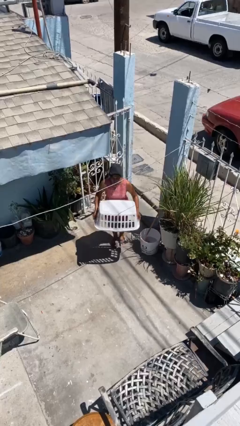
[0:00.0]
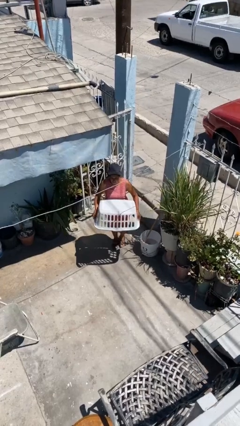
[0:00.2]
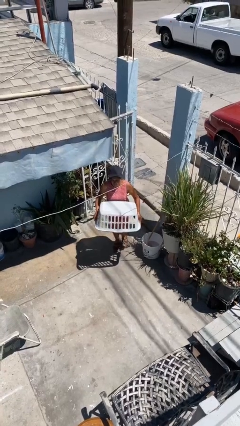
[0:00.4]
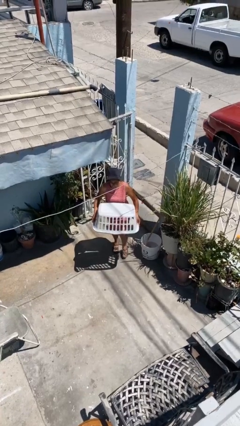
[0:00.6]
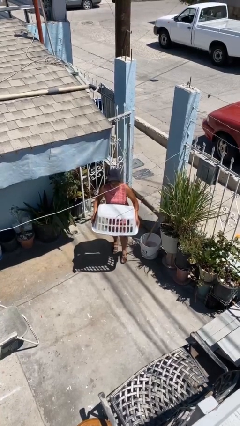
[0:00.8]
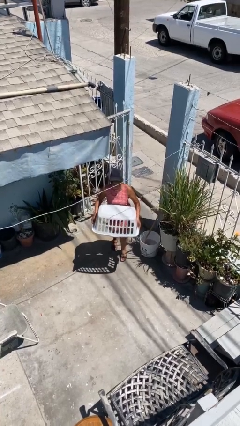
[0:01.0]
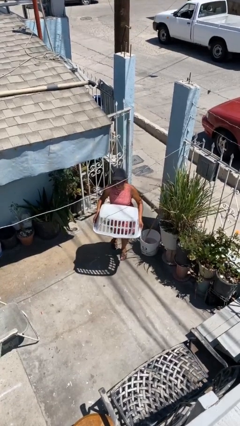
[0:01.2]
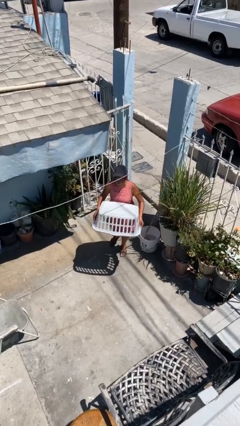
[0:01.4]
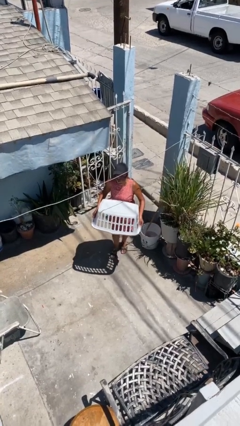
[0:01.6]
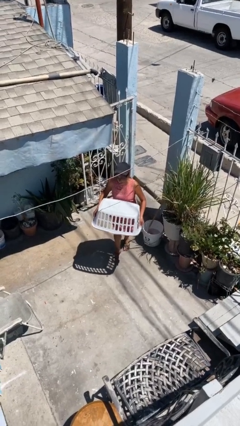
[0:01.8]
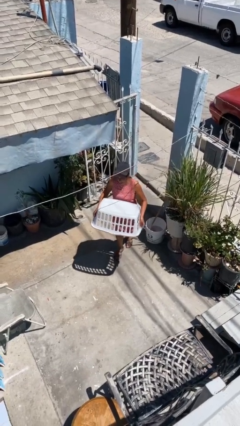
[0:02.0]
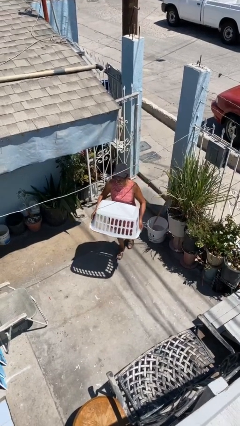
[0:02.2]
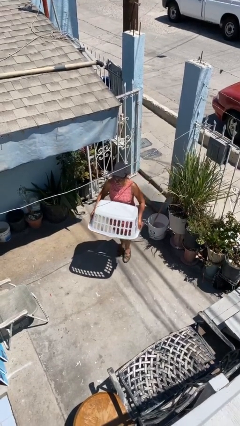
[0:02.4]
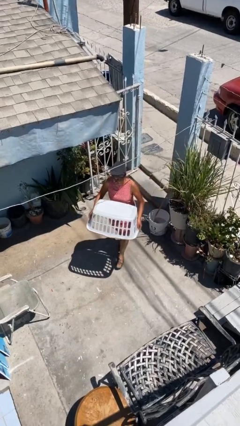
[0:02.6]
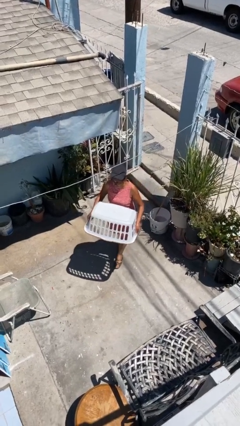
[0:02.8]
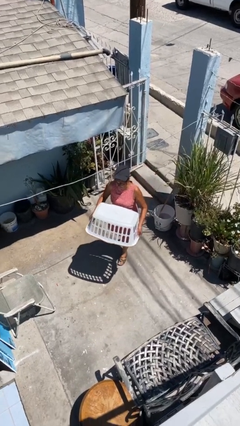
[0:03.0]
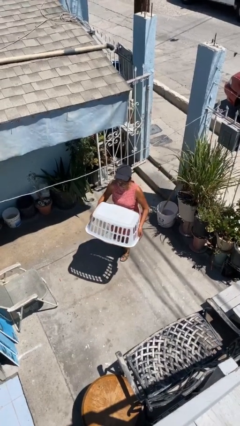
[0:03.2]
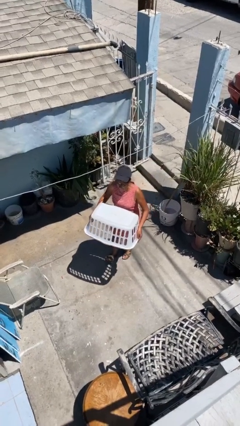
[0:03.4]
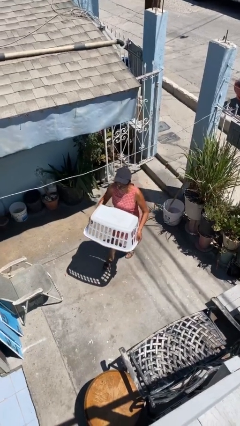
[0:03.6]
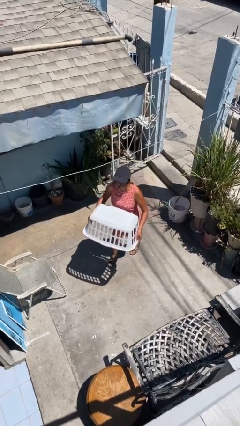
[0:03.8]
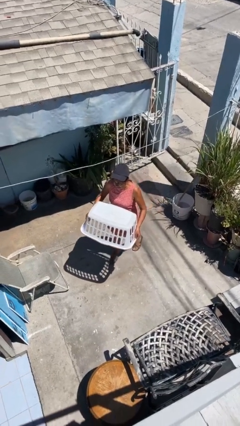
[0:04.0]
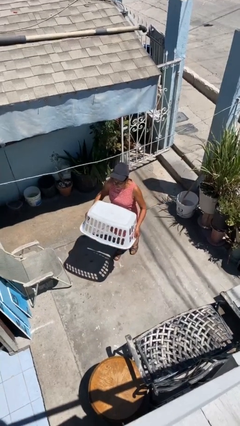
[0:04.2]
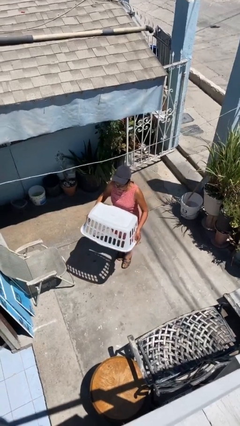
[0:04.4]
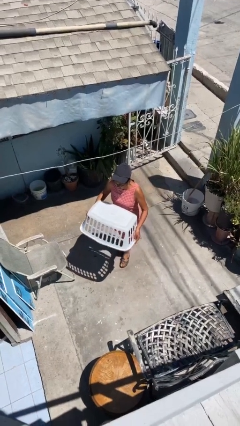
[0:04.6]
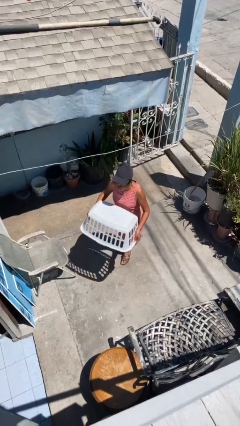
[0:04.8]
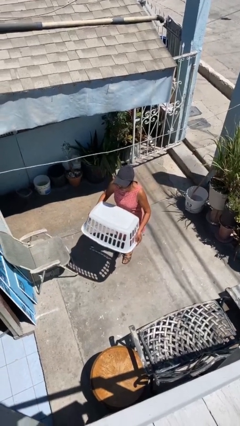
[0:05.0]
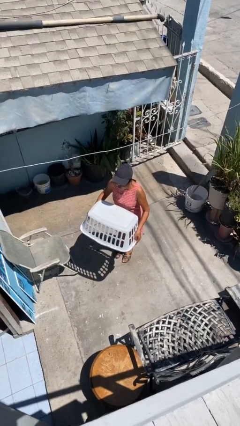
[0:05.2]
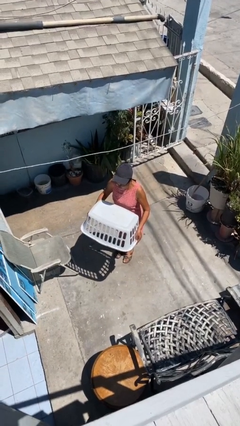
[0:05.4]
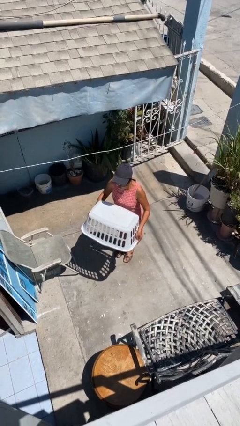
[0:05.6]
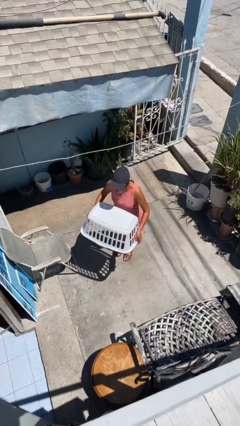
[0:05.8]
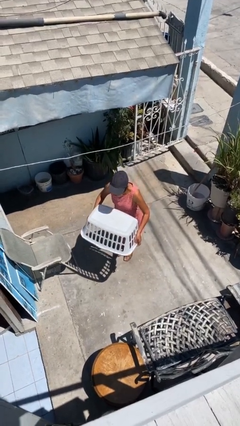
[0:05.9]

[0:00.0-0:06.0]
person carries heavy object

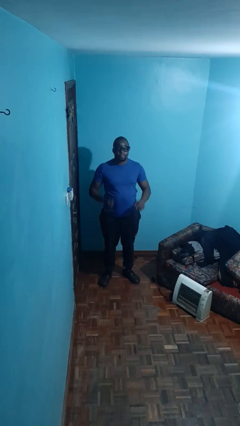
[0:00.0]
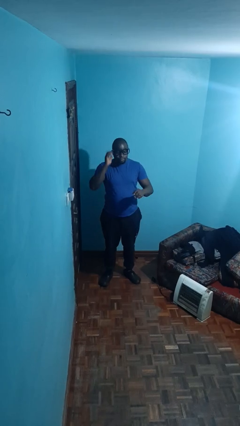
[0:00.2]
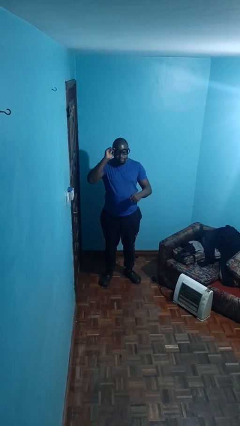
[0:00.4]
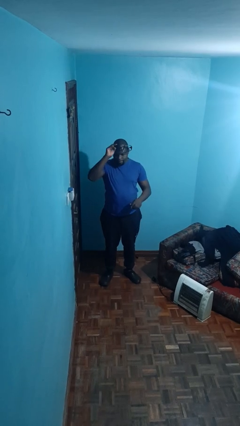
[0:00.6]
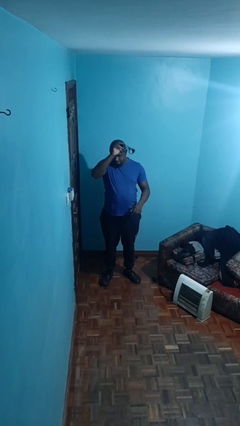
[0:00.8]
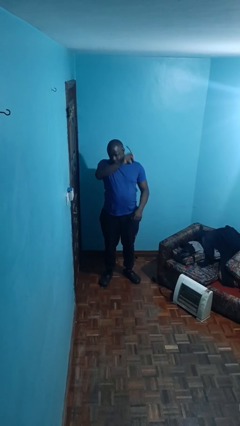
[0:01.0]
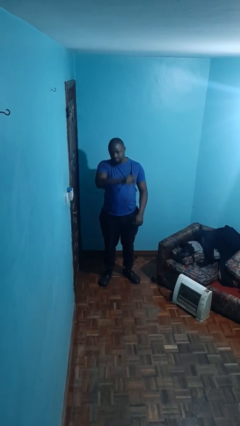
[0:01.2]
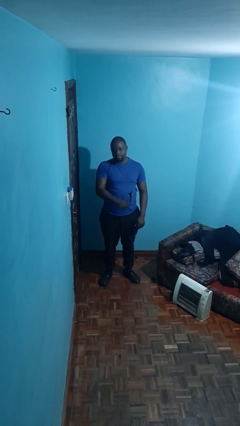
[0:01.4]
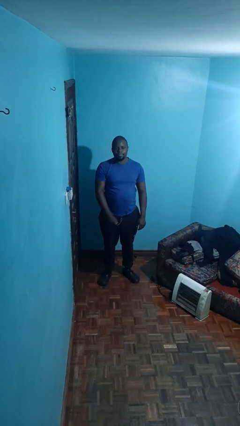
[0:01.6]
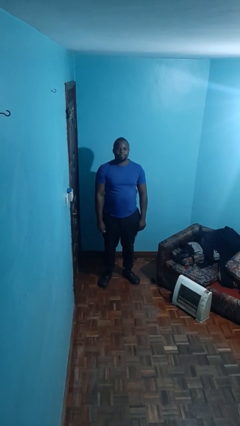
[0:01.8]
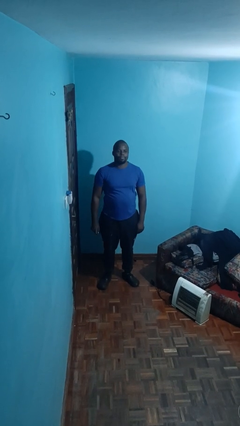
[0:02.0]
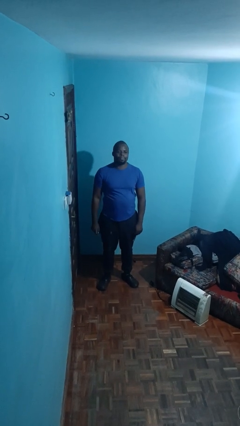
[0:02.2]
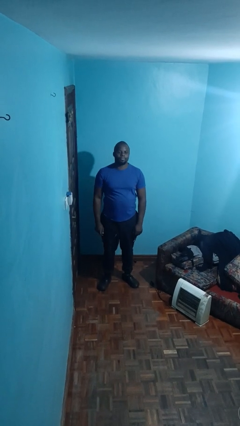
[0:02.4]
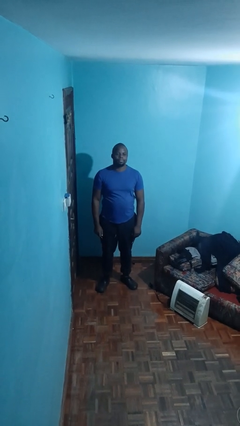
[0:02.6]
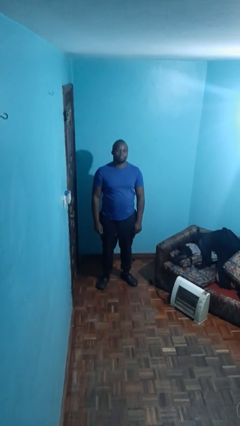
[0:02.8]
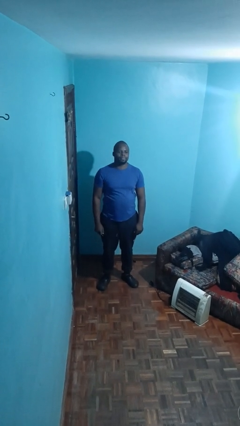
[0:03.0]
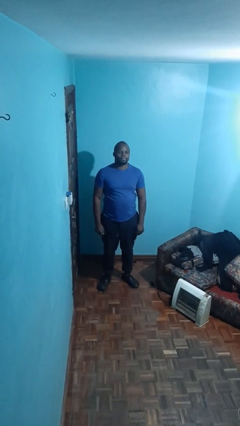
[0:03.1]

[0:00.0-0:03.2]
person takes off glasses

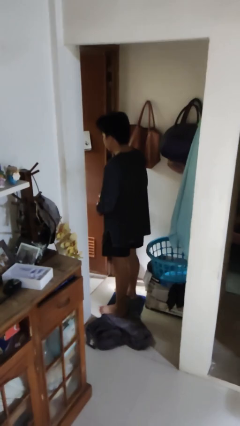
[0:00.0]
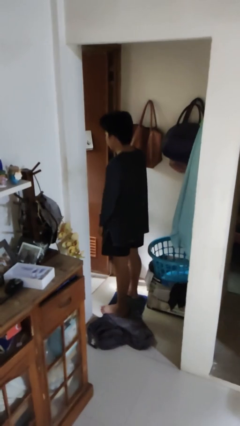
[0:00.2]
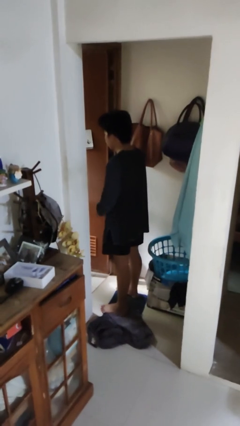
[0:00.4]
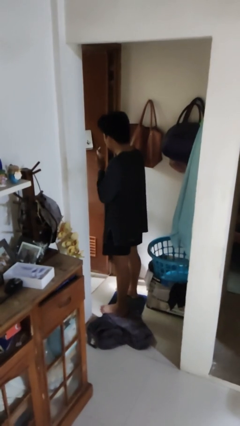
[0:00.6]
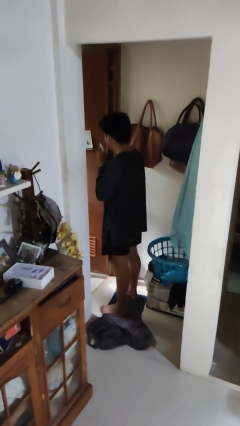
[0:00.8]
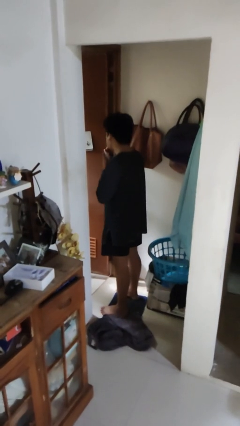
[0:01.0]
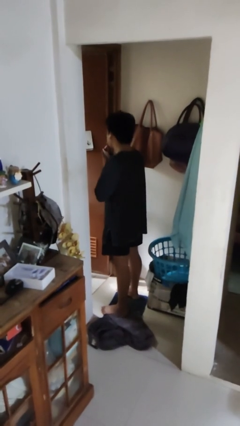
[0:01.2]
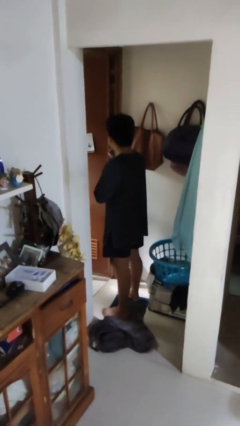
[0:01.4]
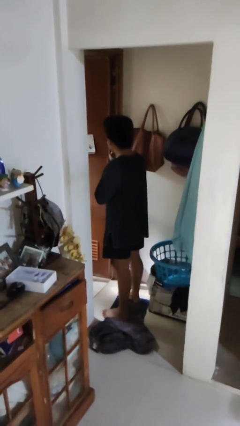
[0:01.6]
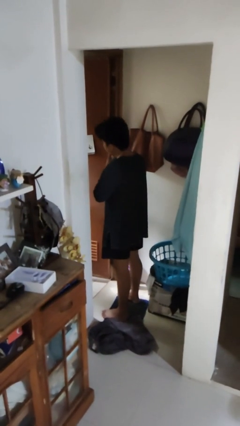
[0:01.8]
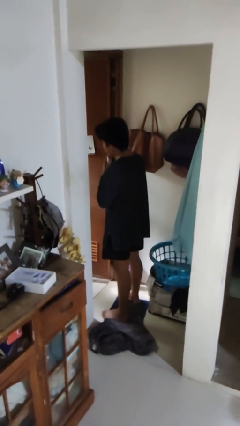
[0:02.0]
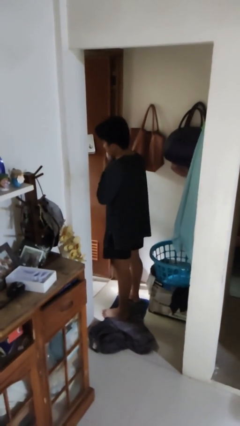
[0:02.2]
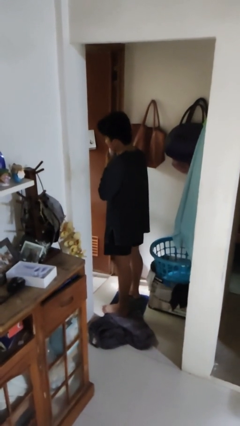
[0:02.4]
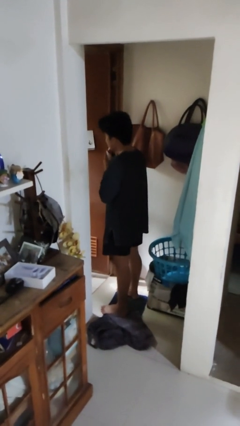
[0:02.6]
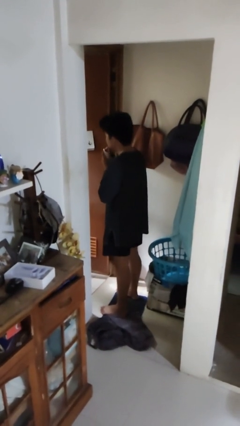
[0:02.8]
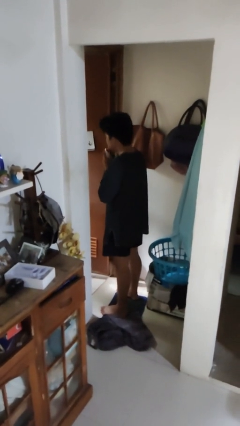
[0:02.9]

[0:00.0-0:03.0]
person shaves face

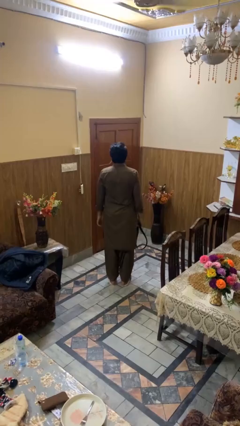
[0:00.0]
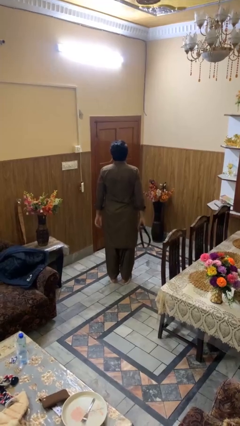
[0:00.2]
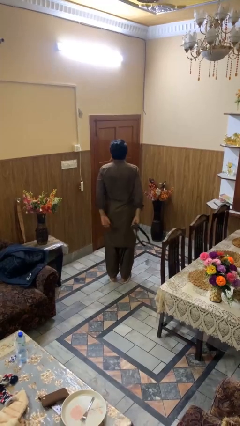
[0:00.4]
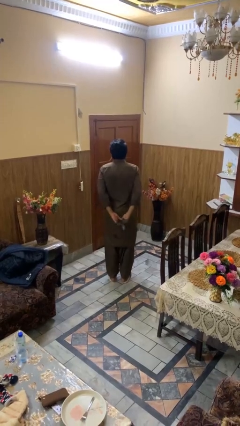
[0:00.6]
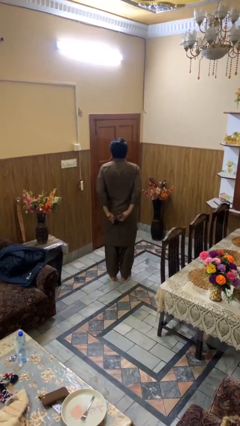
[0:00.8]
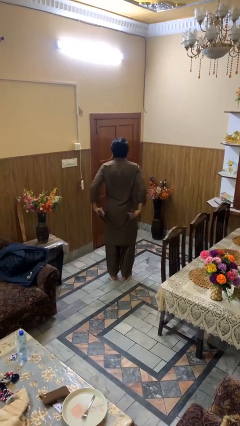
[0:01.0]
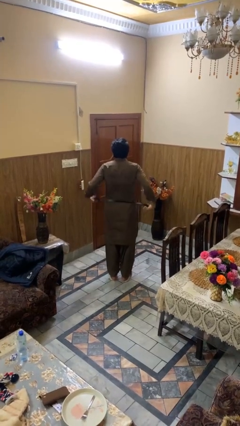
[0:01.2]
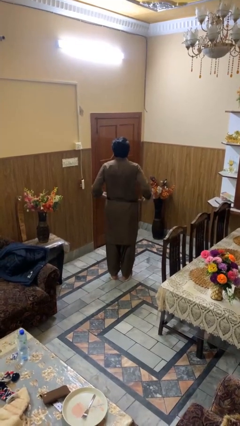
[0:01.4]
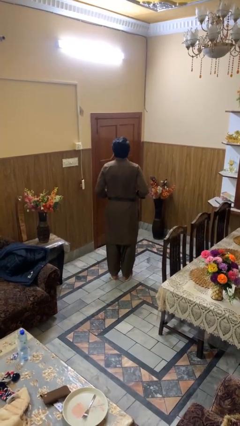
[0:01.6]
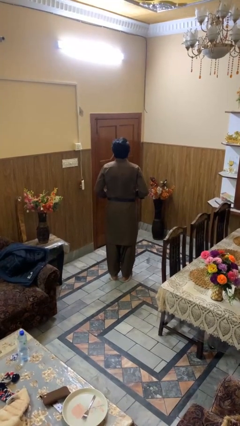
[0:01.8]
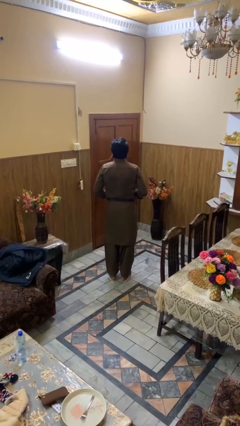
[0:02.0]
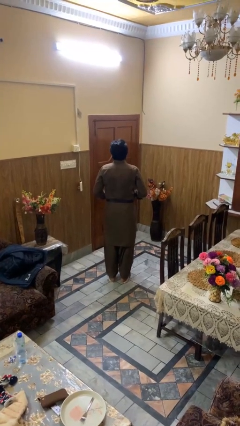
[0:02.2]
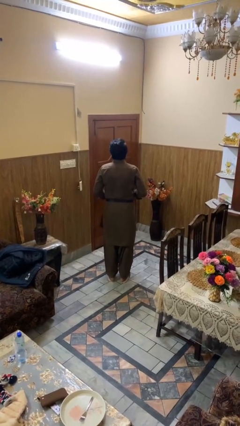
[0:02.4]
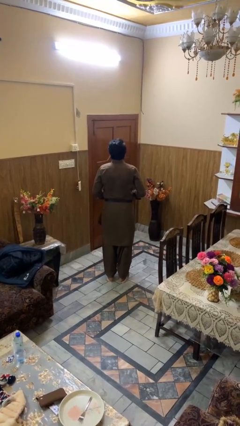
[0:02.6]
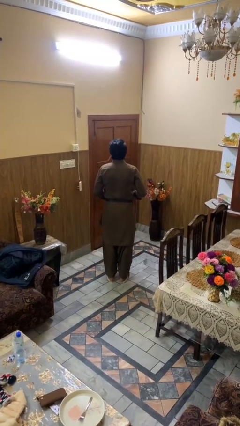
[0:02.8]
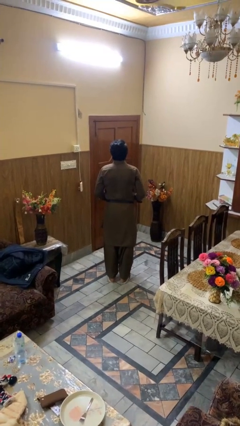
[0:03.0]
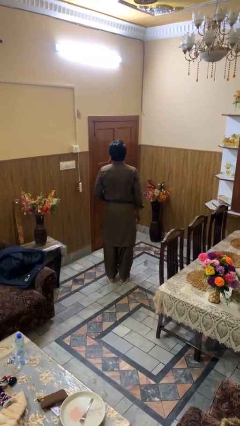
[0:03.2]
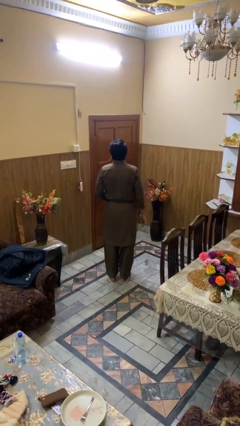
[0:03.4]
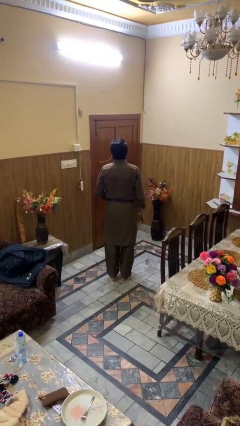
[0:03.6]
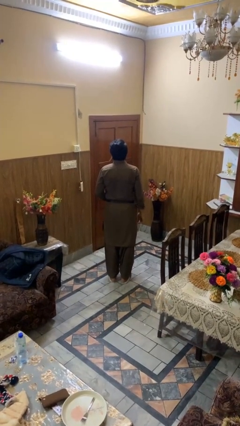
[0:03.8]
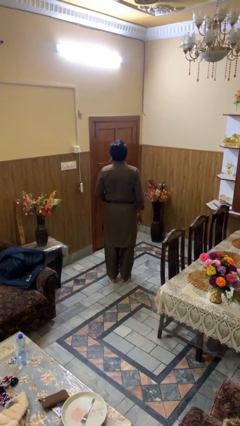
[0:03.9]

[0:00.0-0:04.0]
person puts on belt

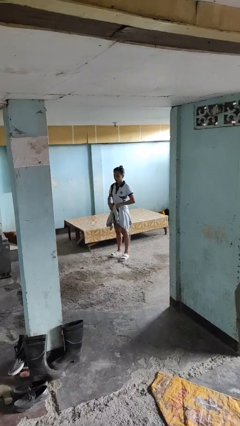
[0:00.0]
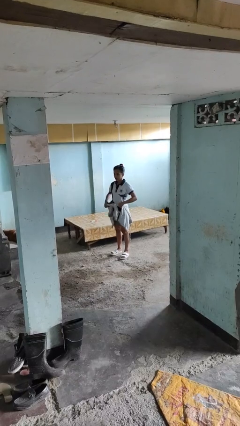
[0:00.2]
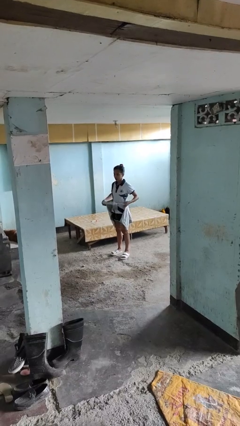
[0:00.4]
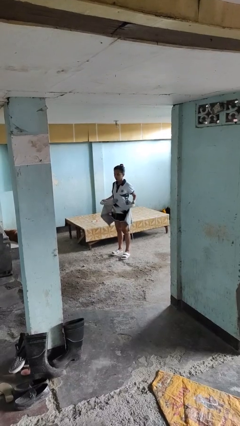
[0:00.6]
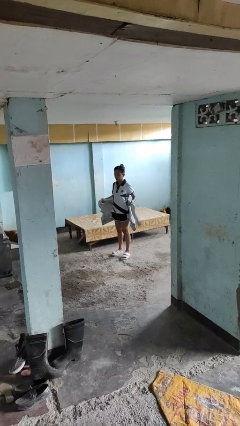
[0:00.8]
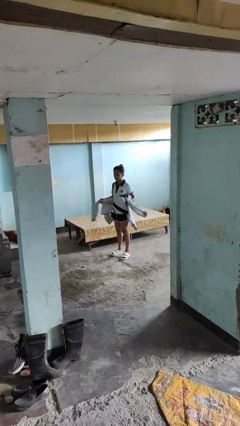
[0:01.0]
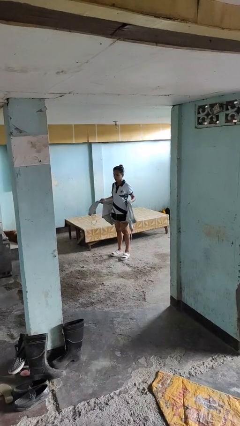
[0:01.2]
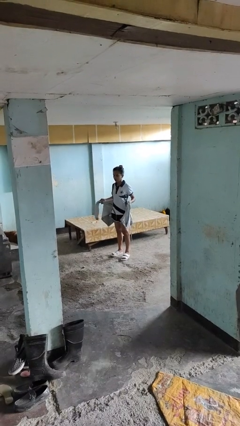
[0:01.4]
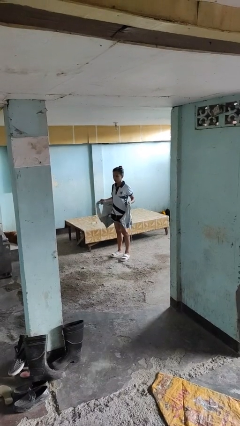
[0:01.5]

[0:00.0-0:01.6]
person unties jacket around waist

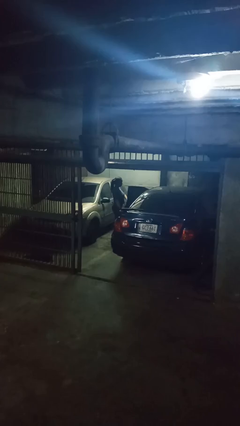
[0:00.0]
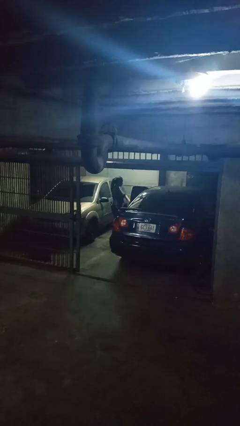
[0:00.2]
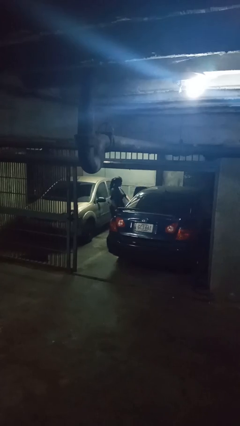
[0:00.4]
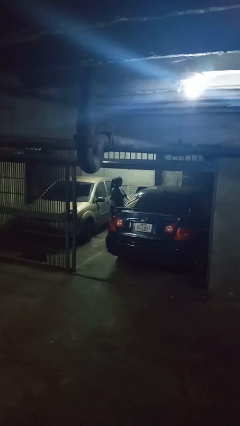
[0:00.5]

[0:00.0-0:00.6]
person closes car door
